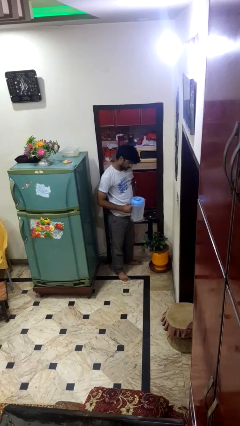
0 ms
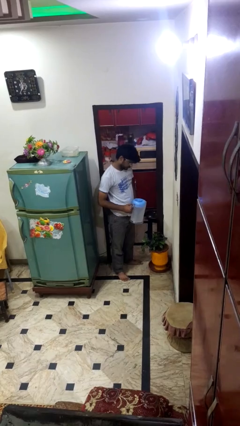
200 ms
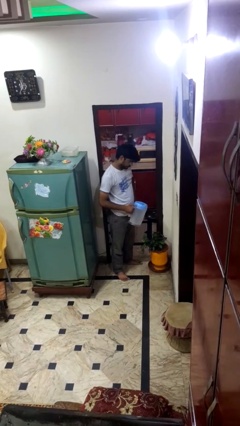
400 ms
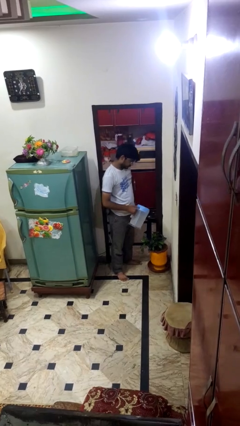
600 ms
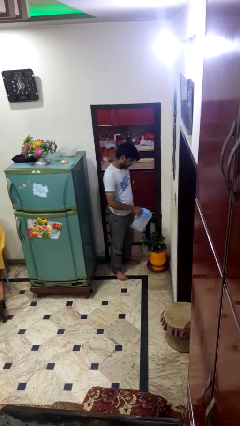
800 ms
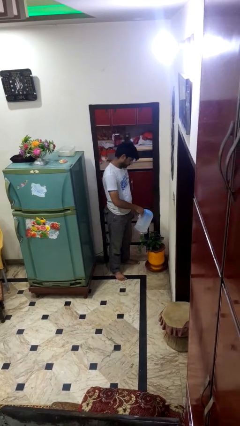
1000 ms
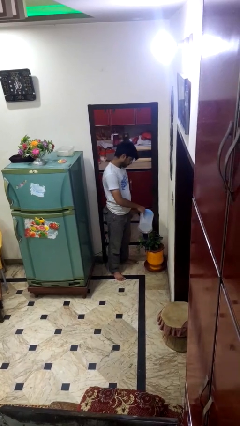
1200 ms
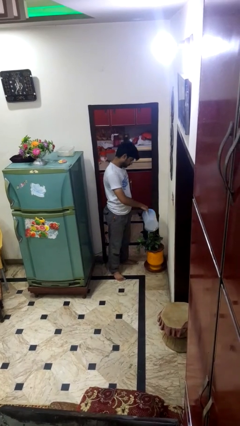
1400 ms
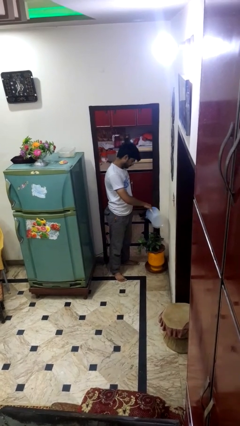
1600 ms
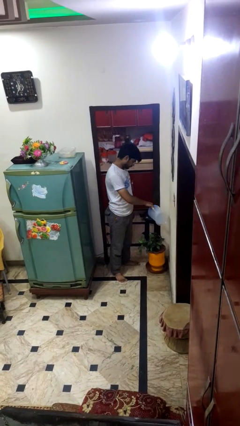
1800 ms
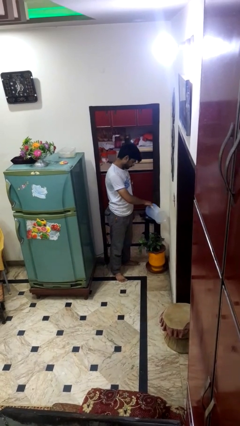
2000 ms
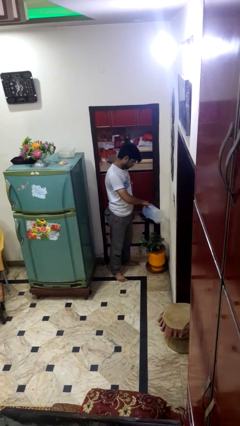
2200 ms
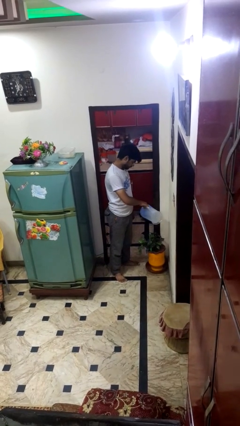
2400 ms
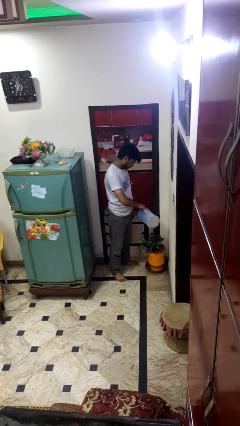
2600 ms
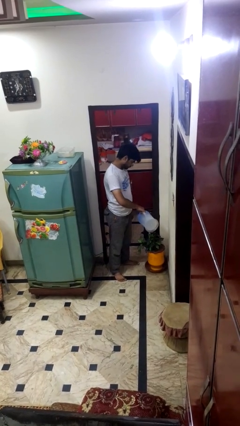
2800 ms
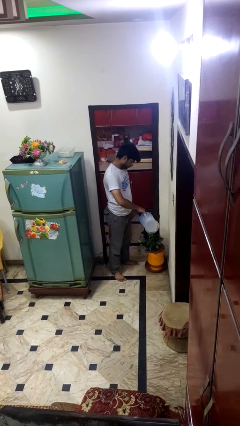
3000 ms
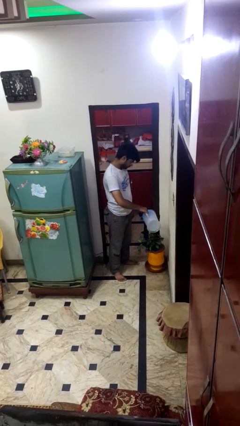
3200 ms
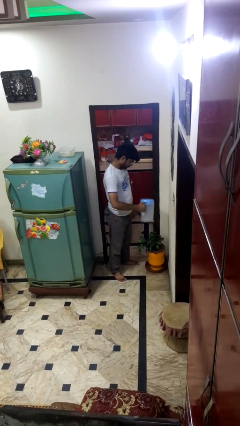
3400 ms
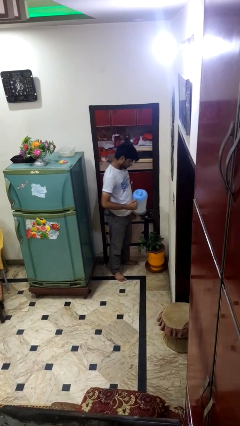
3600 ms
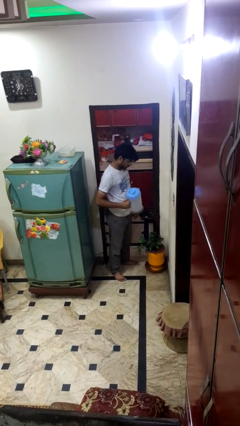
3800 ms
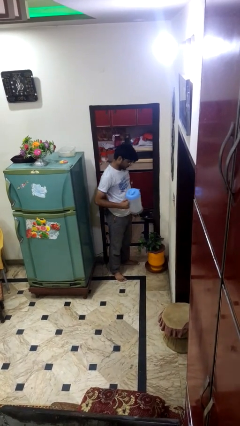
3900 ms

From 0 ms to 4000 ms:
person waters houseplant

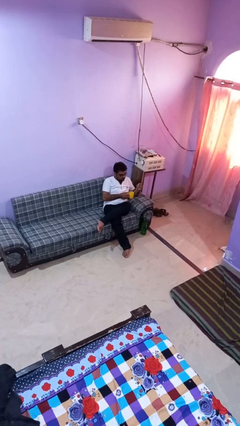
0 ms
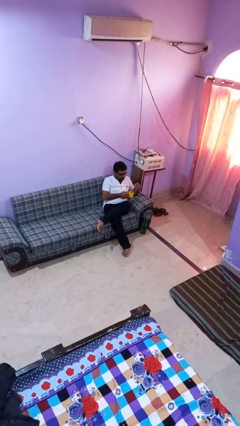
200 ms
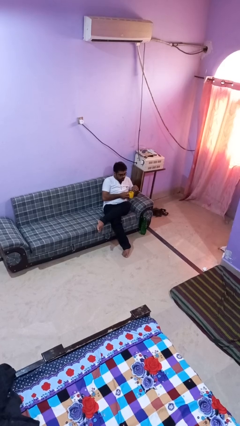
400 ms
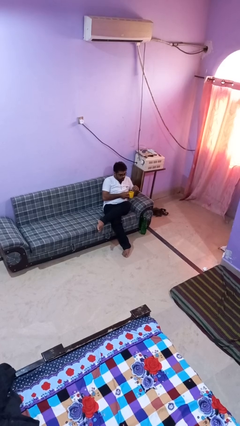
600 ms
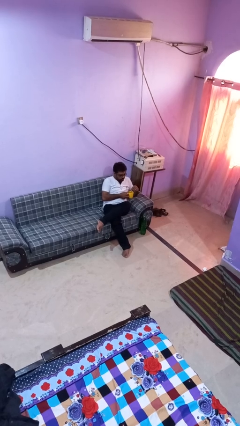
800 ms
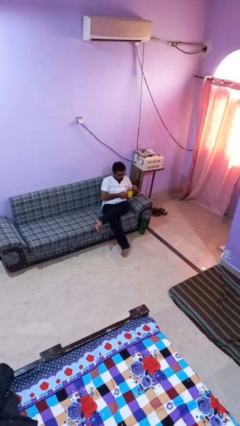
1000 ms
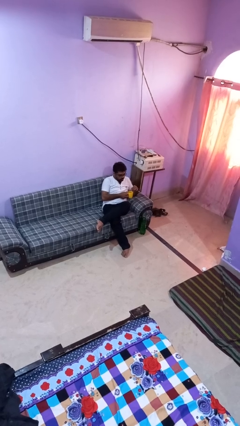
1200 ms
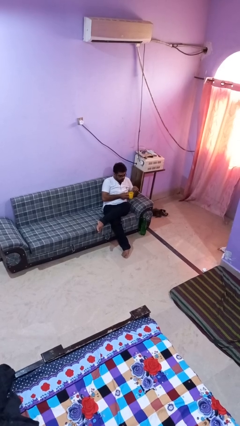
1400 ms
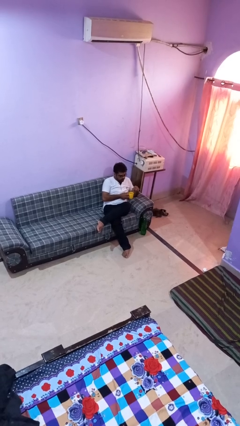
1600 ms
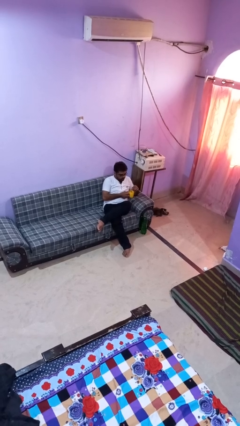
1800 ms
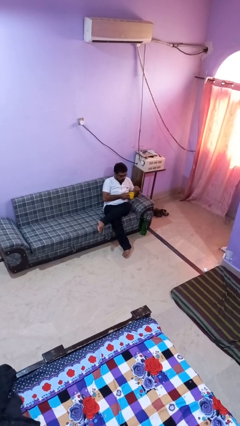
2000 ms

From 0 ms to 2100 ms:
person stirs mug

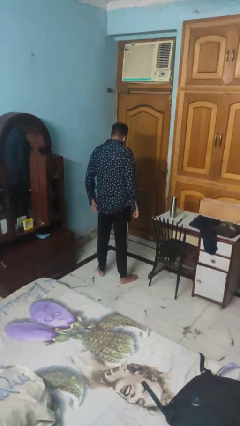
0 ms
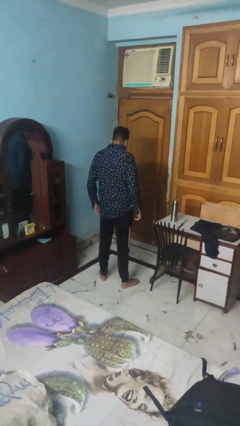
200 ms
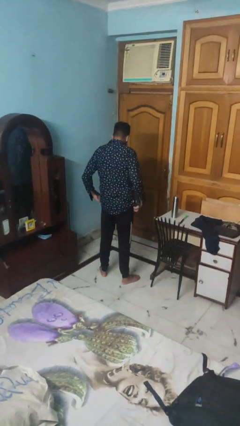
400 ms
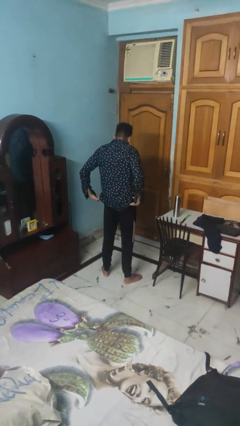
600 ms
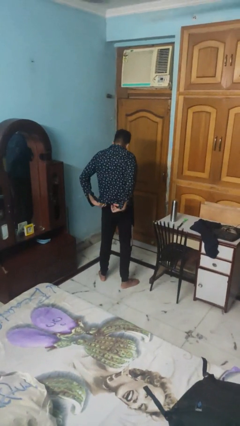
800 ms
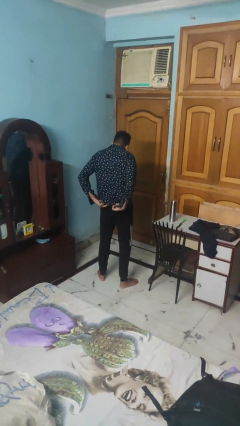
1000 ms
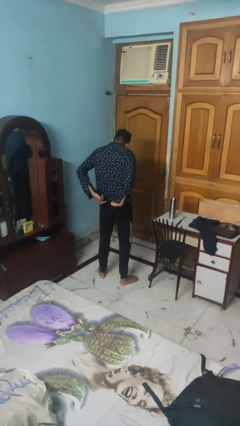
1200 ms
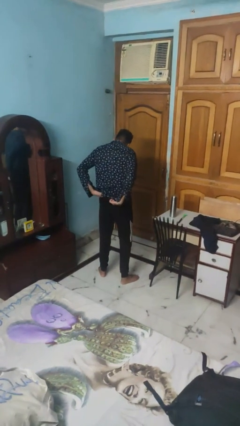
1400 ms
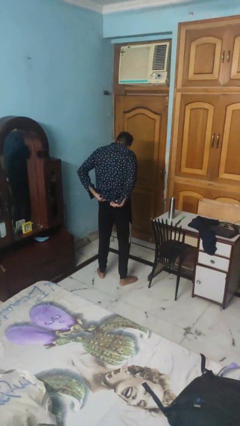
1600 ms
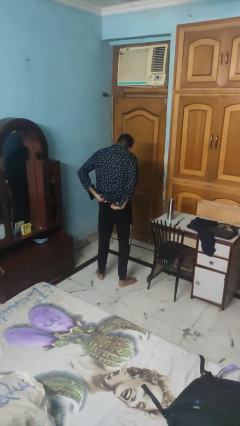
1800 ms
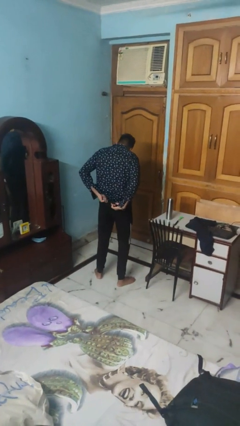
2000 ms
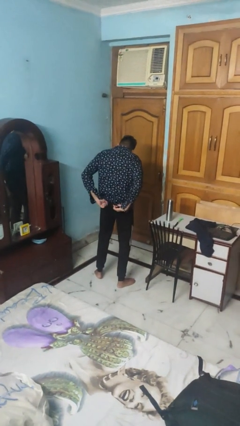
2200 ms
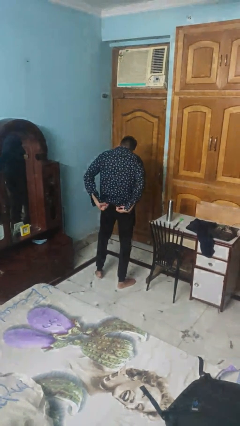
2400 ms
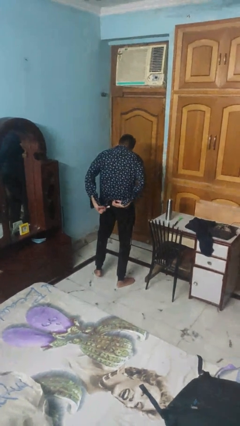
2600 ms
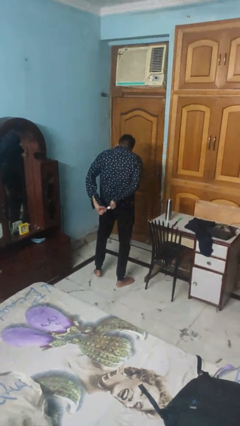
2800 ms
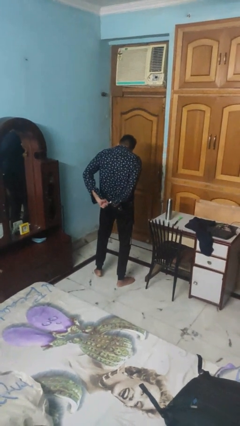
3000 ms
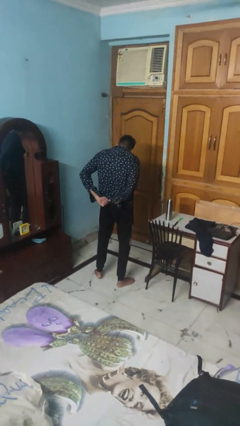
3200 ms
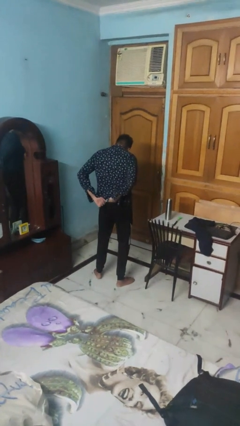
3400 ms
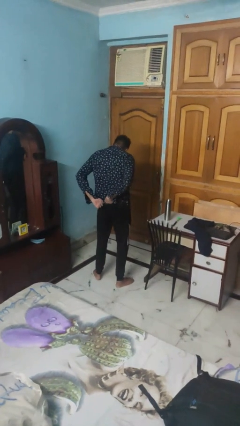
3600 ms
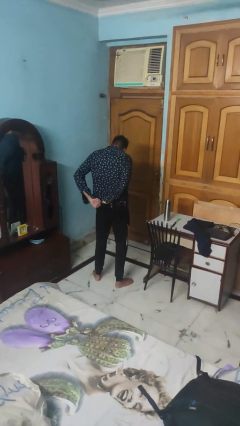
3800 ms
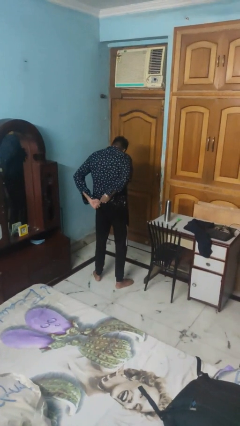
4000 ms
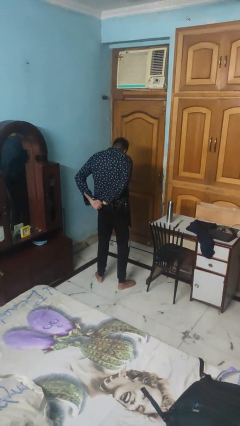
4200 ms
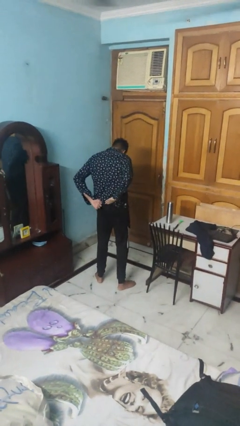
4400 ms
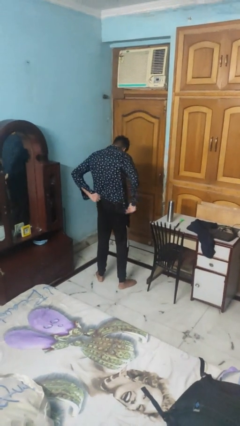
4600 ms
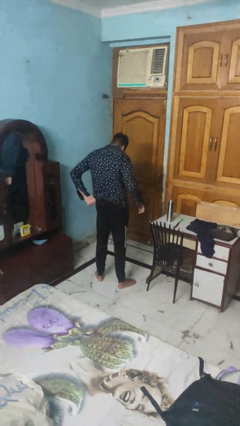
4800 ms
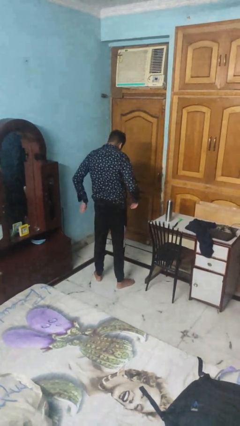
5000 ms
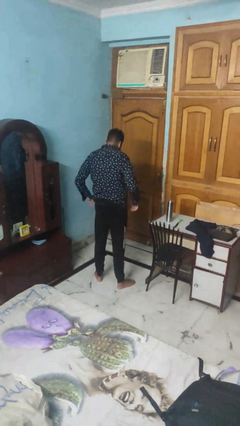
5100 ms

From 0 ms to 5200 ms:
person tucks in shirt

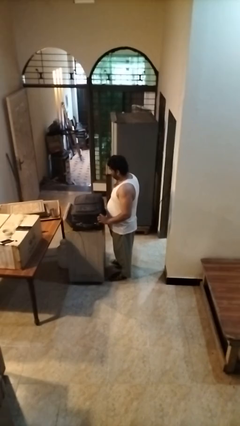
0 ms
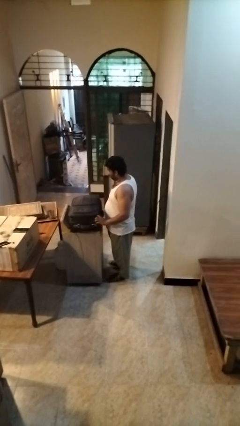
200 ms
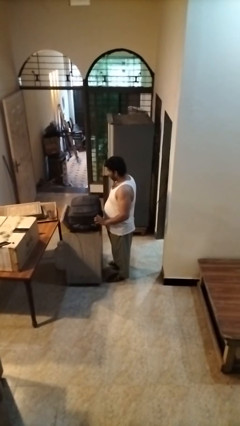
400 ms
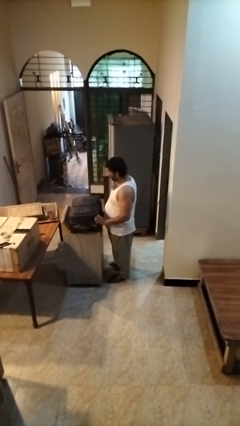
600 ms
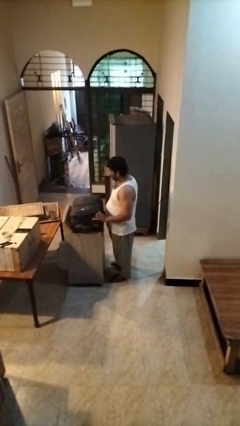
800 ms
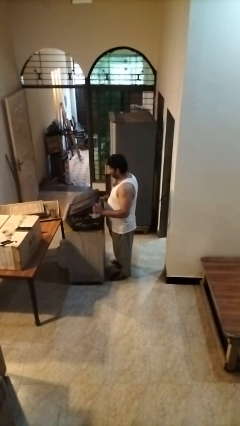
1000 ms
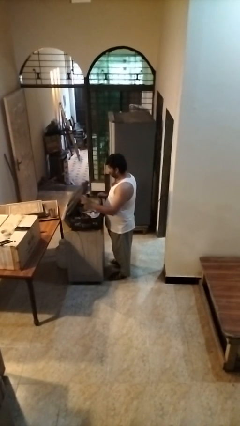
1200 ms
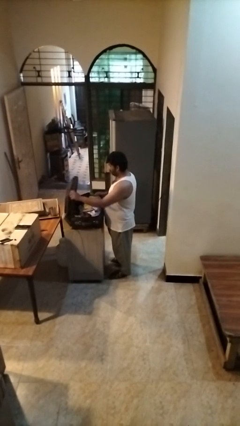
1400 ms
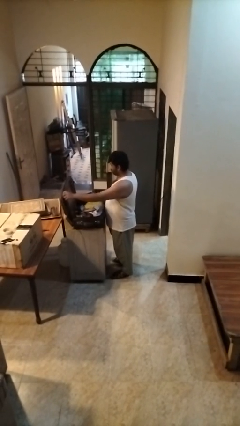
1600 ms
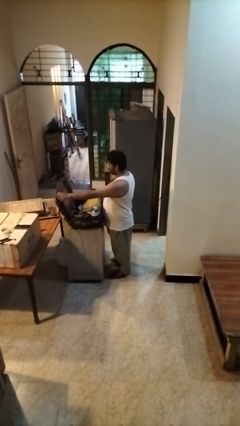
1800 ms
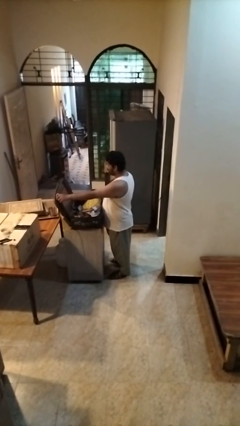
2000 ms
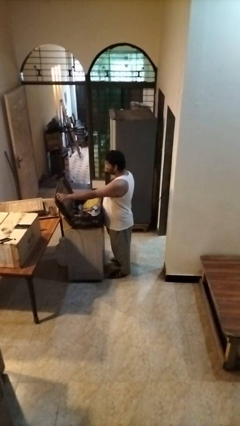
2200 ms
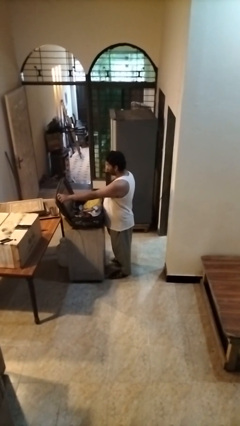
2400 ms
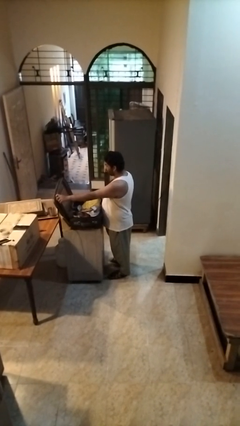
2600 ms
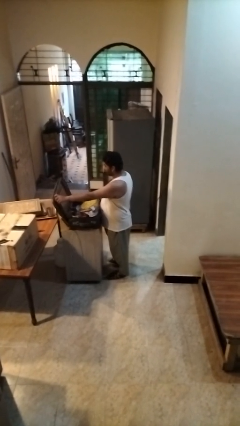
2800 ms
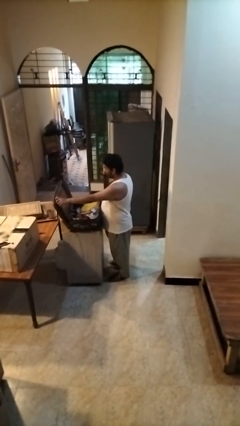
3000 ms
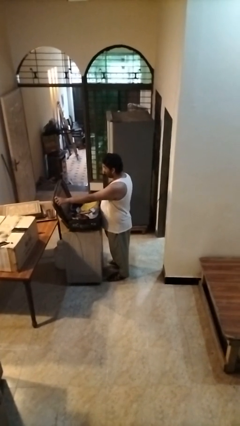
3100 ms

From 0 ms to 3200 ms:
person opens suitcase

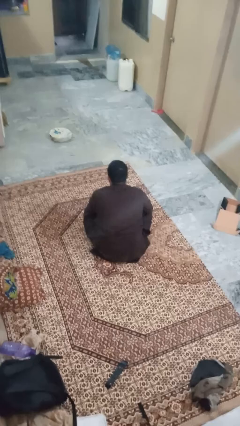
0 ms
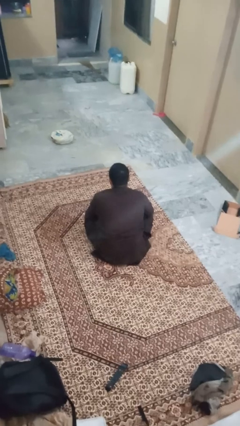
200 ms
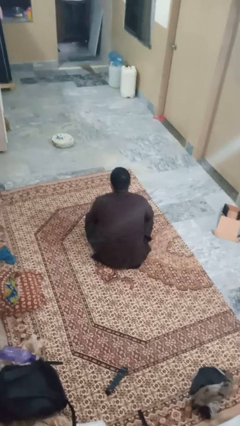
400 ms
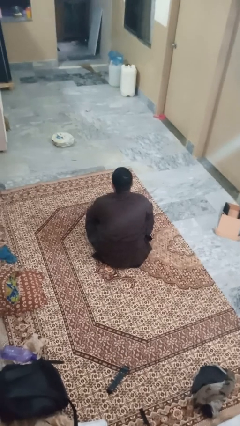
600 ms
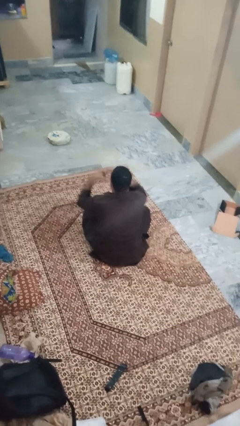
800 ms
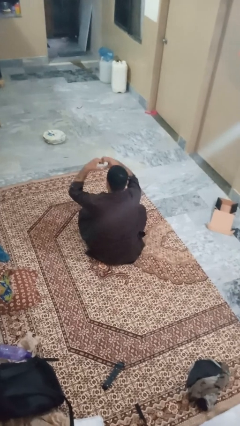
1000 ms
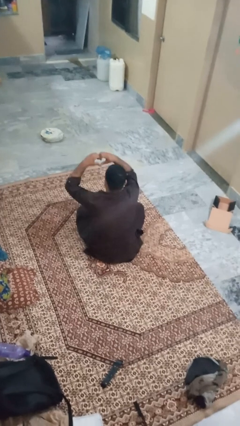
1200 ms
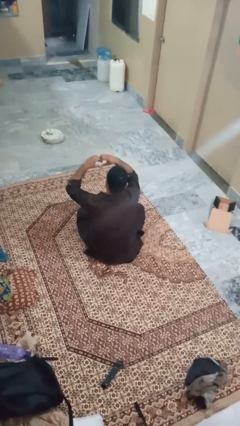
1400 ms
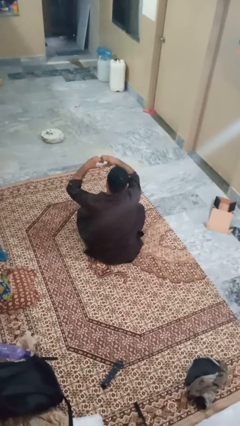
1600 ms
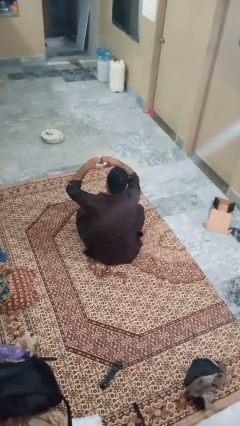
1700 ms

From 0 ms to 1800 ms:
person gestures heart

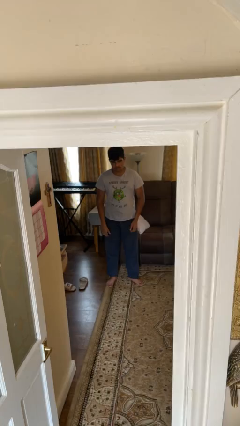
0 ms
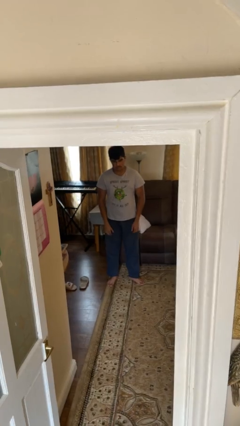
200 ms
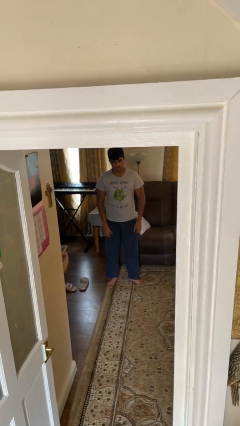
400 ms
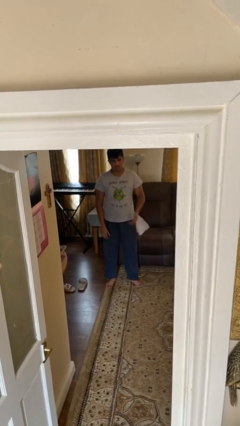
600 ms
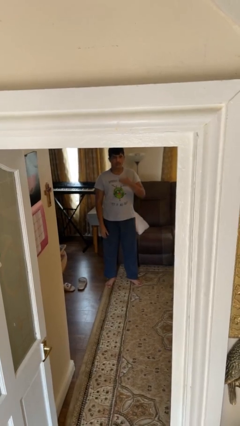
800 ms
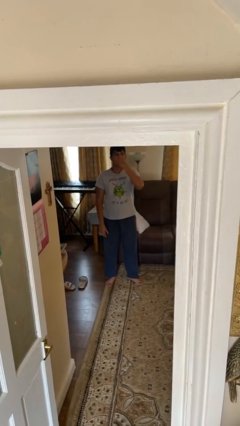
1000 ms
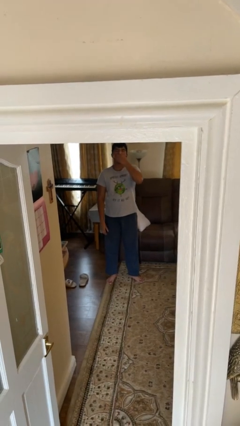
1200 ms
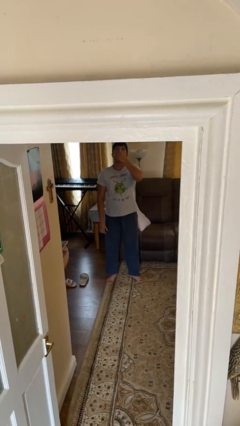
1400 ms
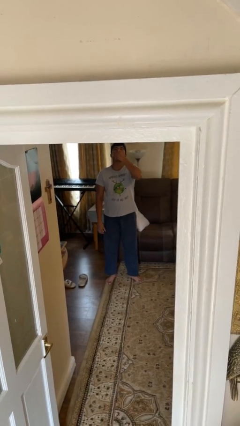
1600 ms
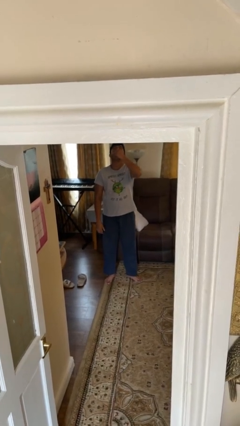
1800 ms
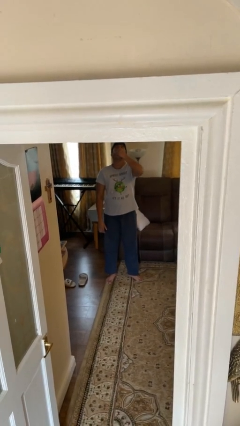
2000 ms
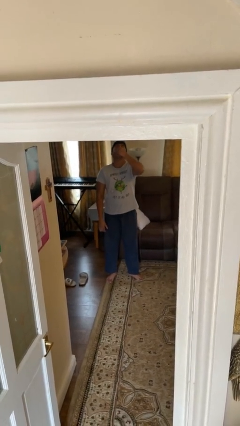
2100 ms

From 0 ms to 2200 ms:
person yawns
